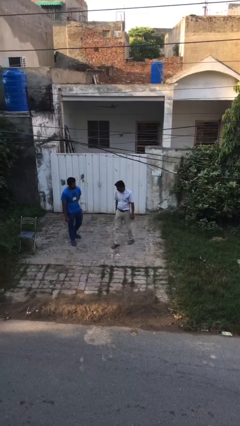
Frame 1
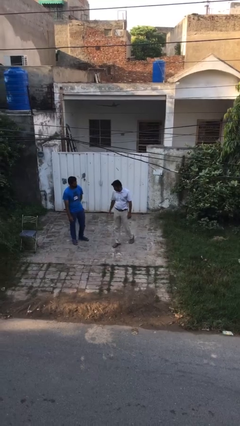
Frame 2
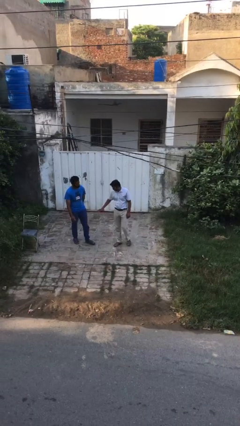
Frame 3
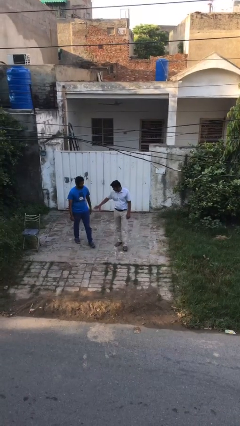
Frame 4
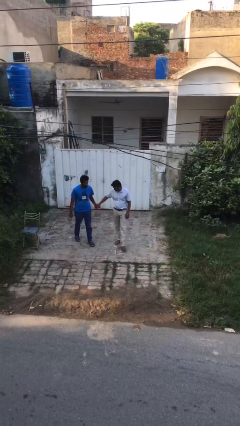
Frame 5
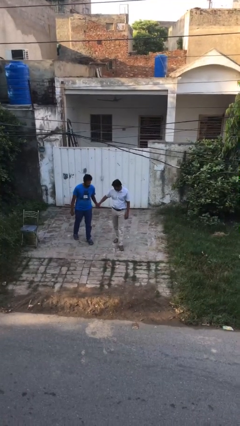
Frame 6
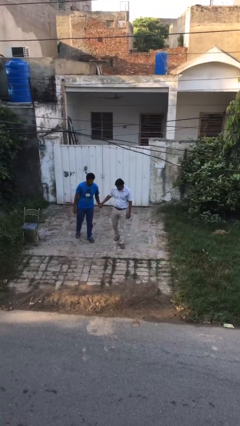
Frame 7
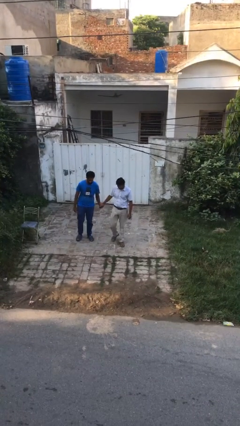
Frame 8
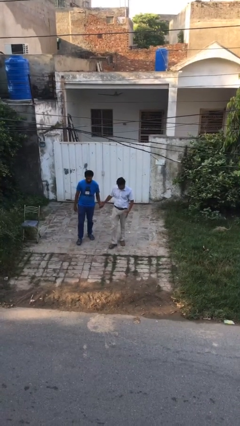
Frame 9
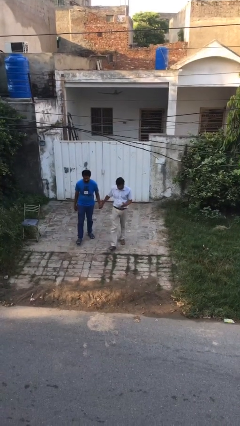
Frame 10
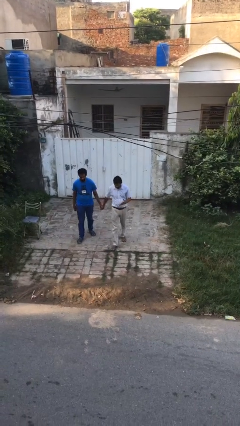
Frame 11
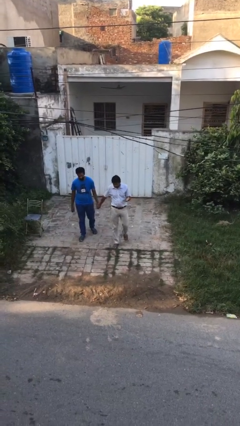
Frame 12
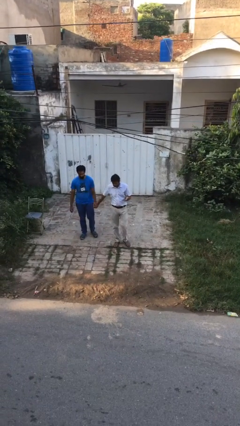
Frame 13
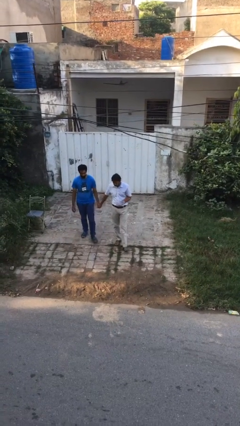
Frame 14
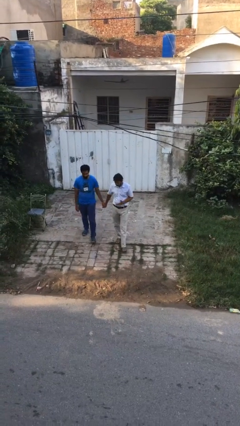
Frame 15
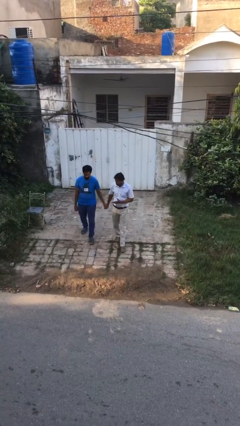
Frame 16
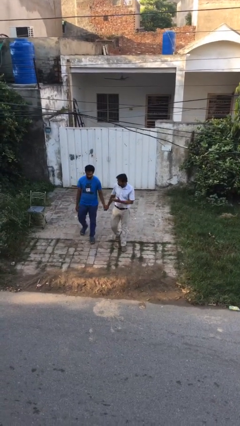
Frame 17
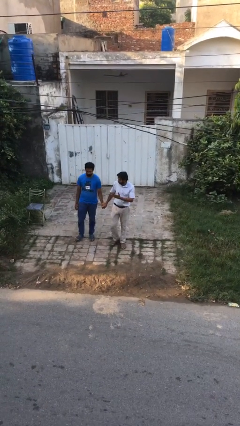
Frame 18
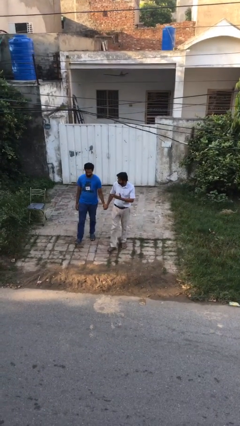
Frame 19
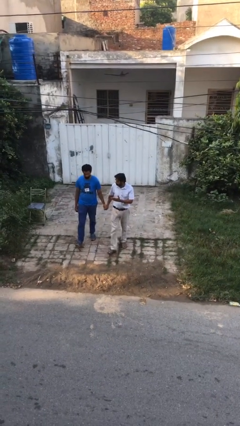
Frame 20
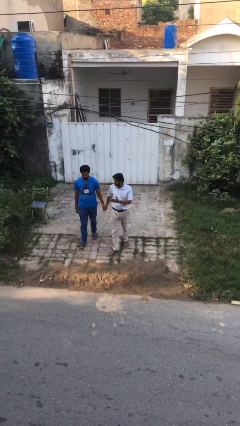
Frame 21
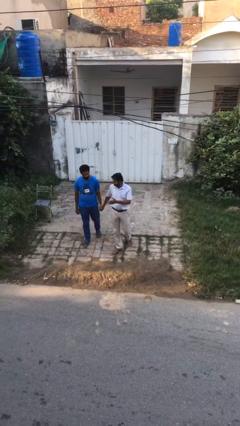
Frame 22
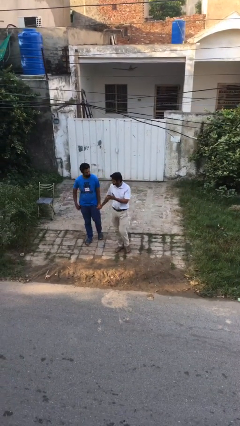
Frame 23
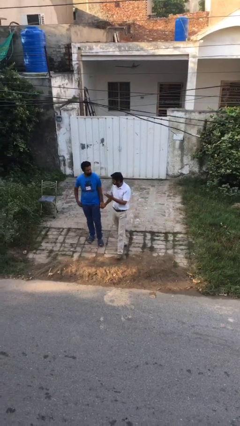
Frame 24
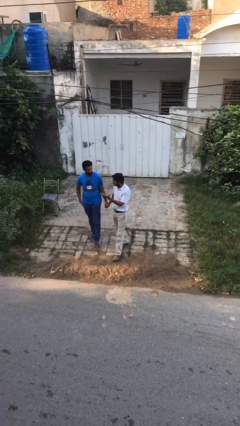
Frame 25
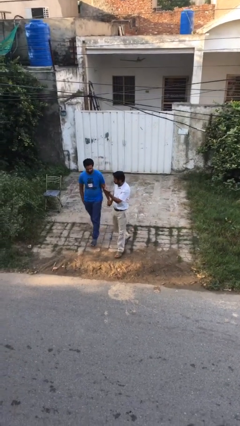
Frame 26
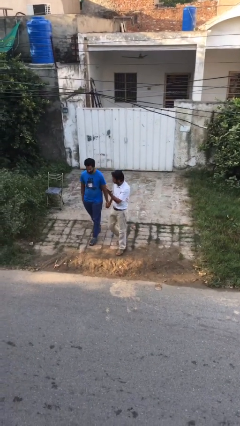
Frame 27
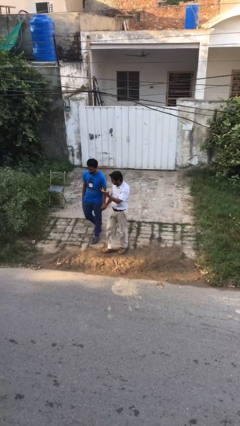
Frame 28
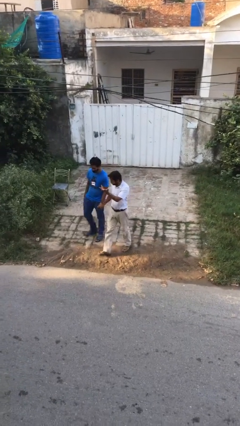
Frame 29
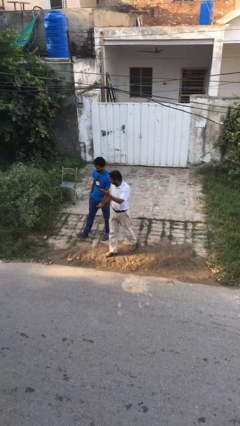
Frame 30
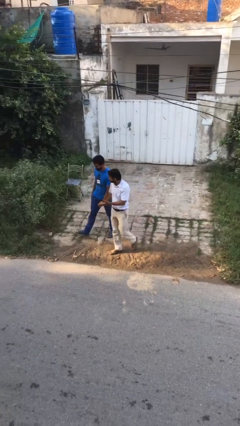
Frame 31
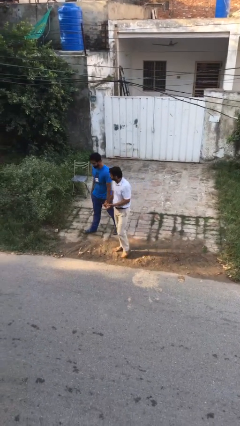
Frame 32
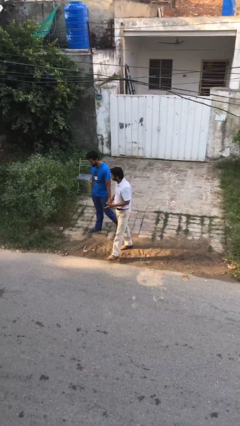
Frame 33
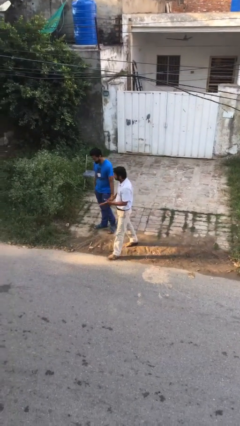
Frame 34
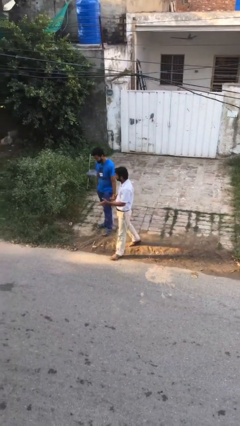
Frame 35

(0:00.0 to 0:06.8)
person holds hand

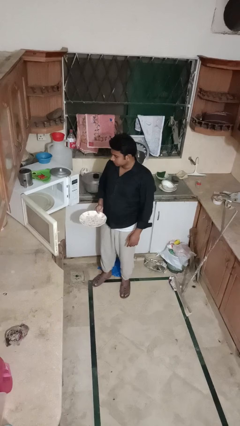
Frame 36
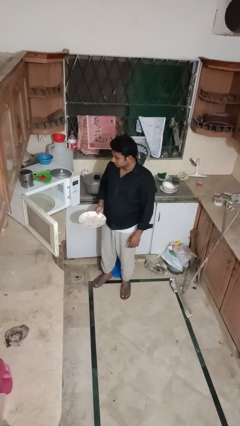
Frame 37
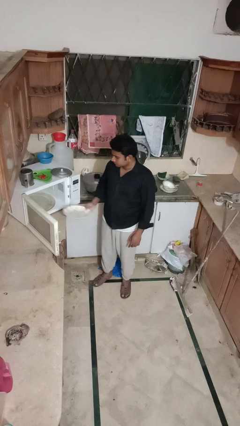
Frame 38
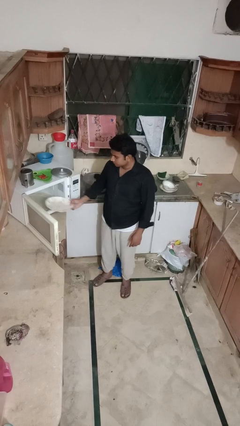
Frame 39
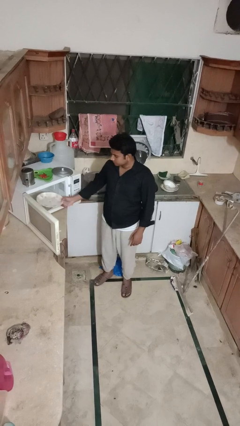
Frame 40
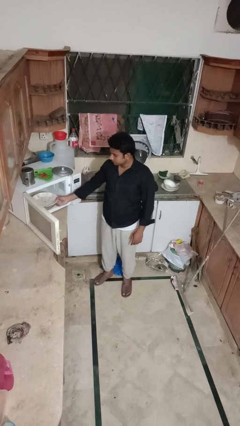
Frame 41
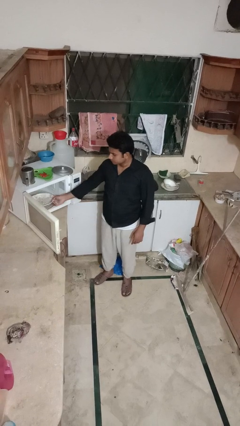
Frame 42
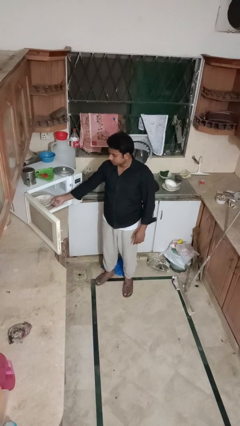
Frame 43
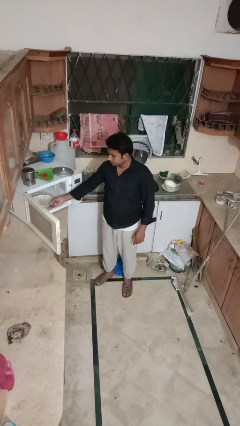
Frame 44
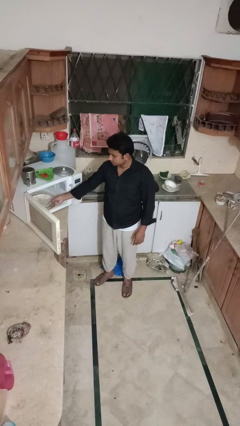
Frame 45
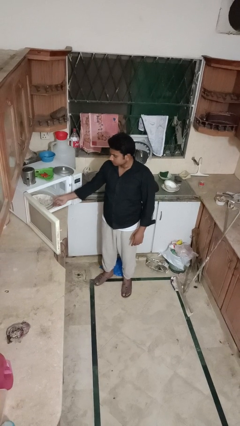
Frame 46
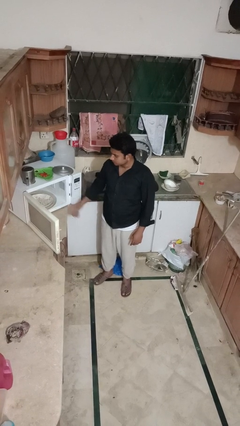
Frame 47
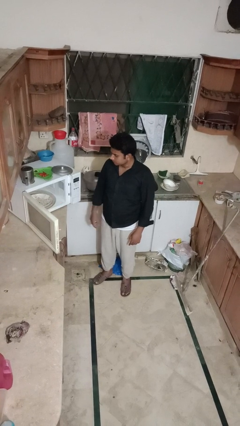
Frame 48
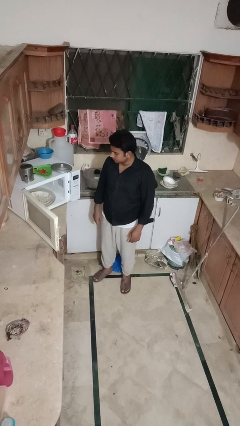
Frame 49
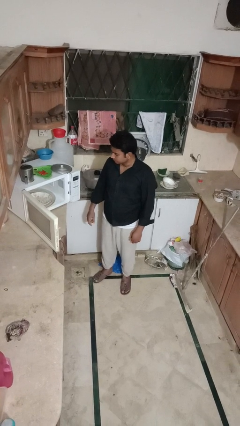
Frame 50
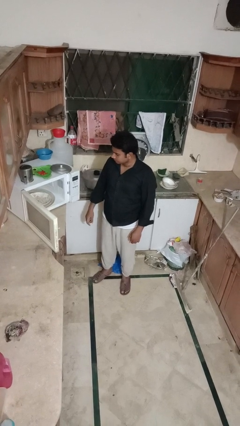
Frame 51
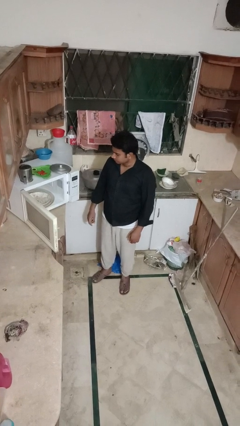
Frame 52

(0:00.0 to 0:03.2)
person puts object into microwave

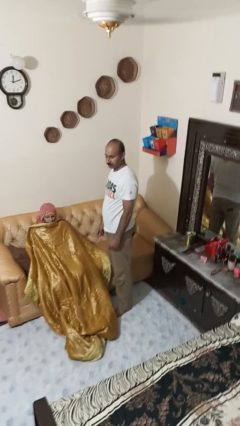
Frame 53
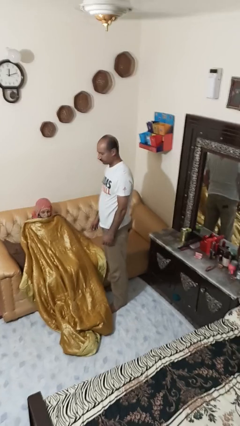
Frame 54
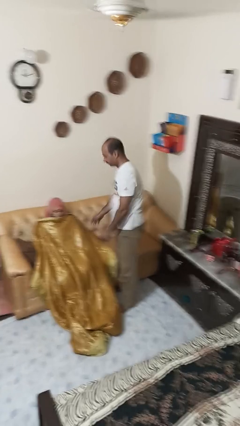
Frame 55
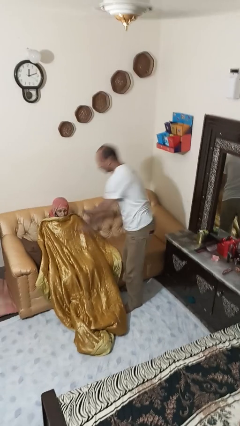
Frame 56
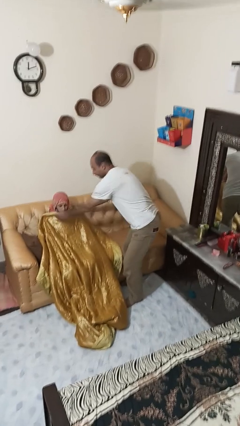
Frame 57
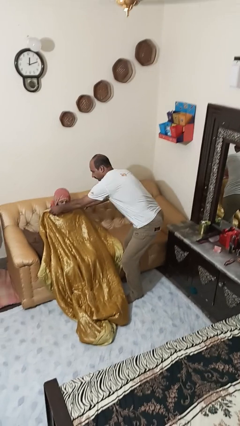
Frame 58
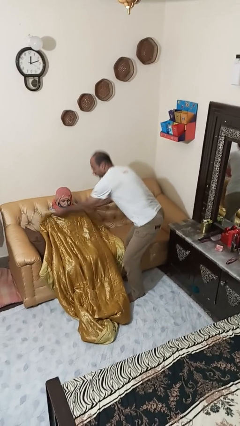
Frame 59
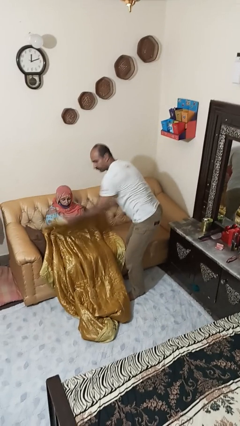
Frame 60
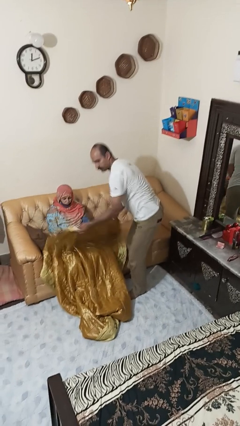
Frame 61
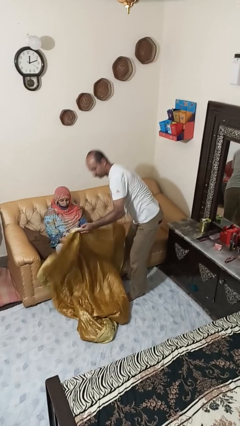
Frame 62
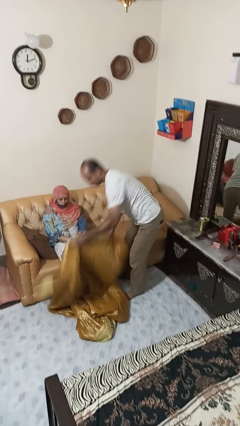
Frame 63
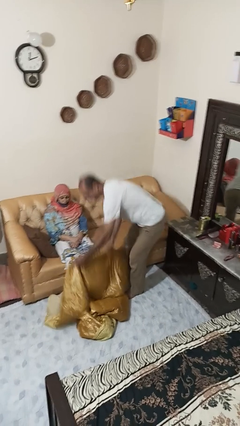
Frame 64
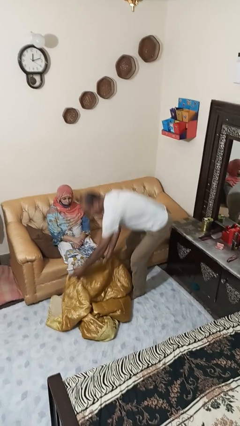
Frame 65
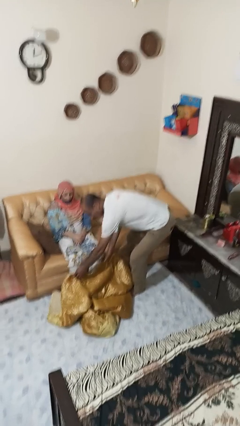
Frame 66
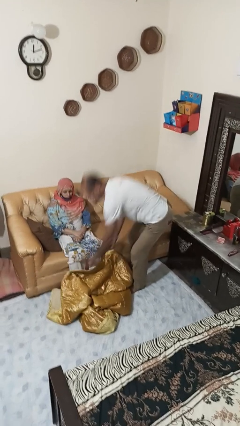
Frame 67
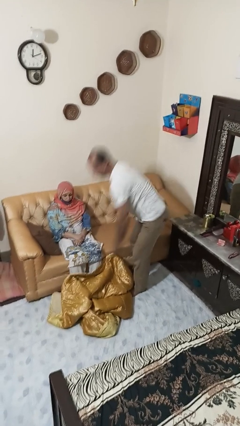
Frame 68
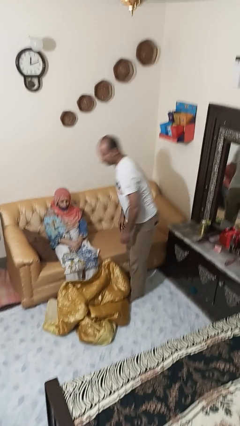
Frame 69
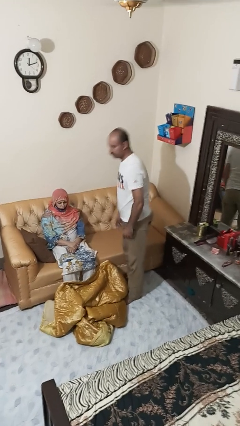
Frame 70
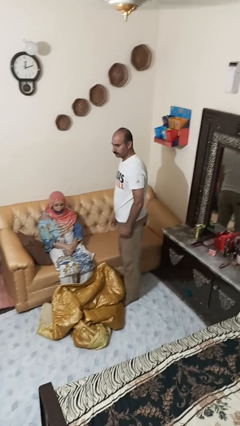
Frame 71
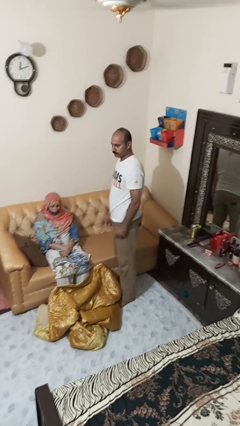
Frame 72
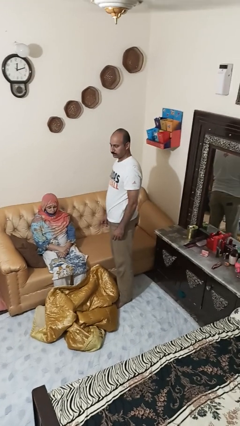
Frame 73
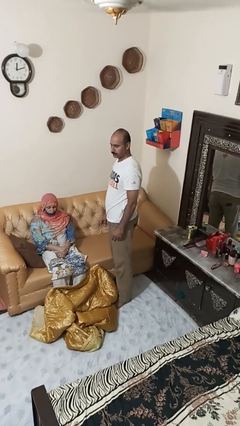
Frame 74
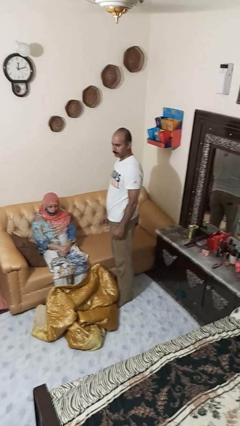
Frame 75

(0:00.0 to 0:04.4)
person uncovers friend with blanket

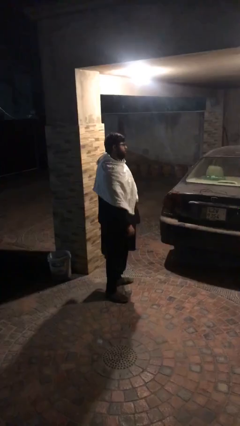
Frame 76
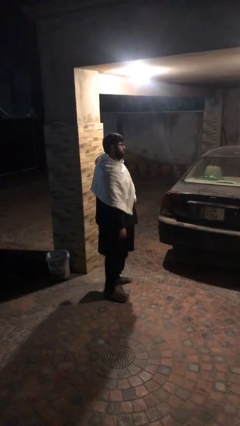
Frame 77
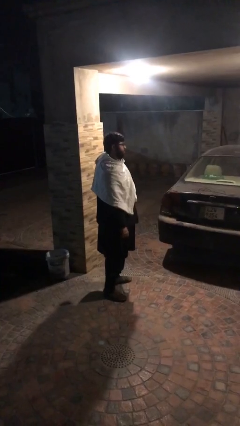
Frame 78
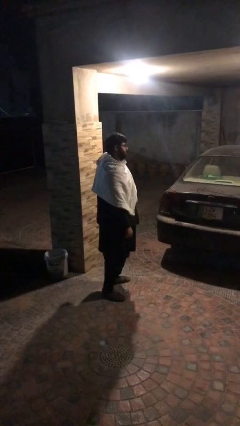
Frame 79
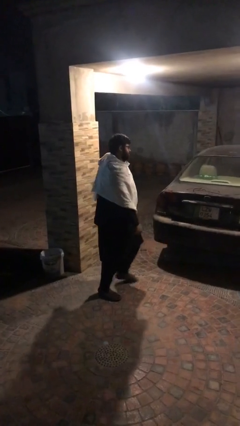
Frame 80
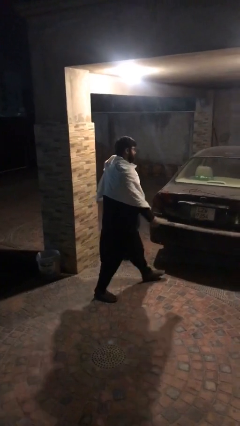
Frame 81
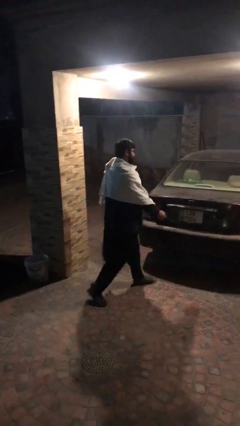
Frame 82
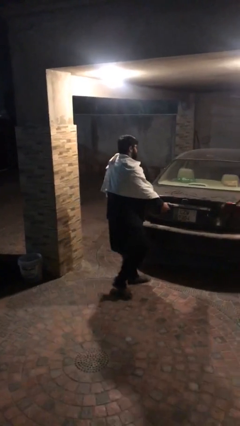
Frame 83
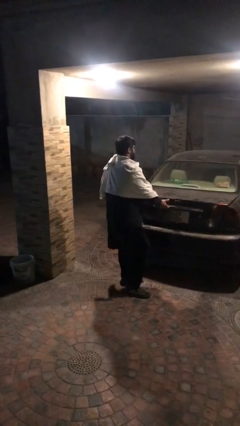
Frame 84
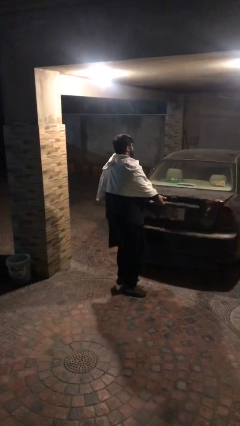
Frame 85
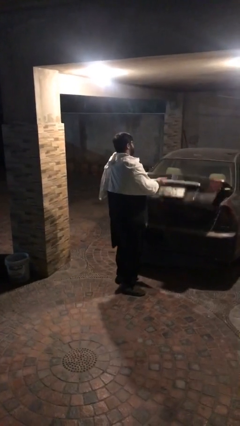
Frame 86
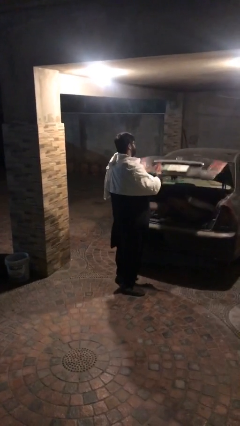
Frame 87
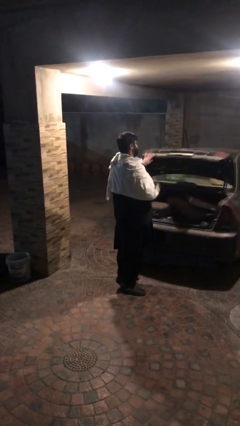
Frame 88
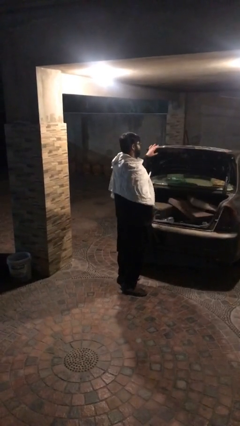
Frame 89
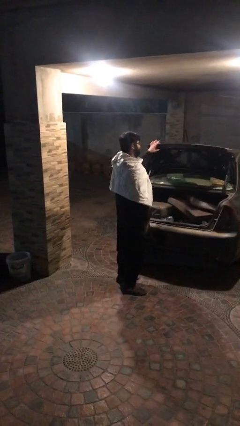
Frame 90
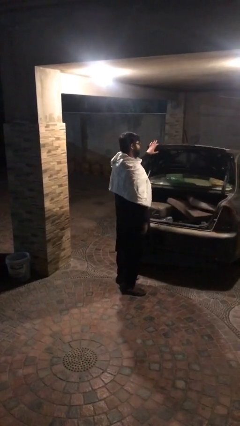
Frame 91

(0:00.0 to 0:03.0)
person opens car trunk

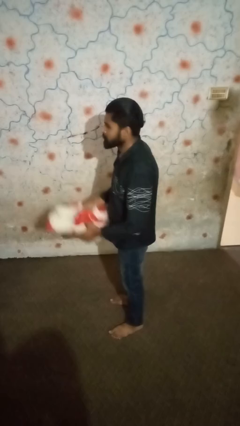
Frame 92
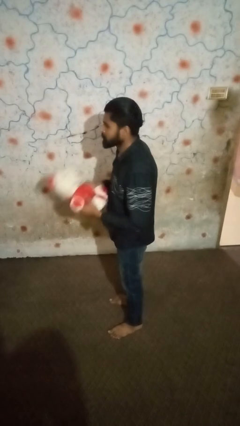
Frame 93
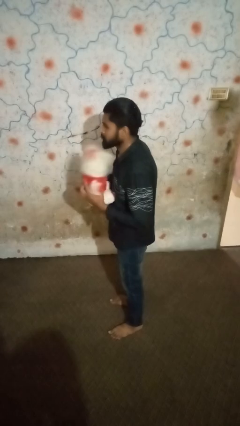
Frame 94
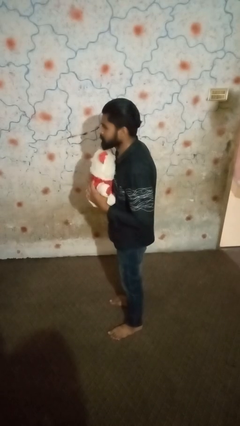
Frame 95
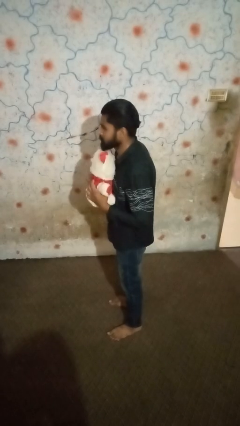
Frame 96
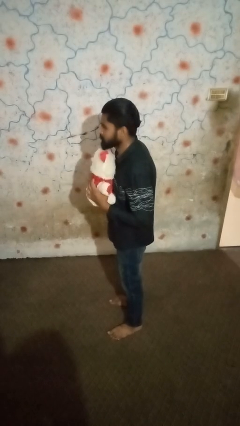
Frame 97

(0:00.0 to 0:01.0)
person hugs stuffed animal
